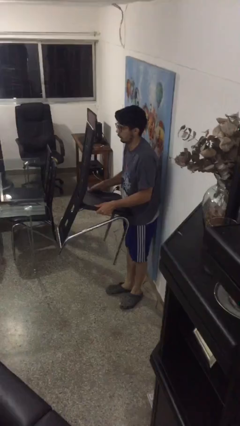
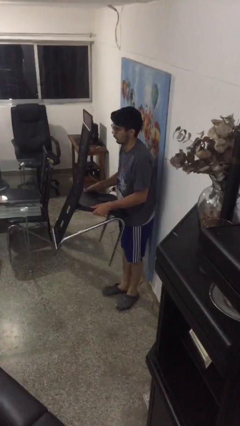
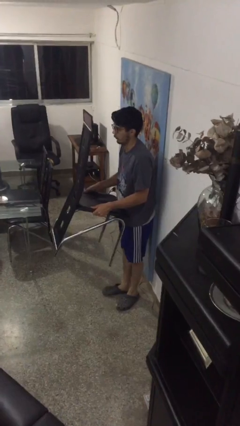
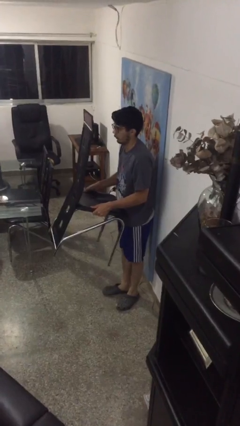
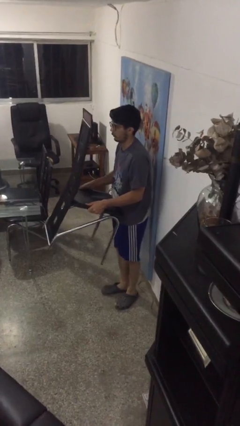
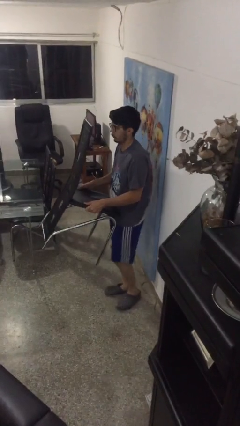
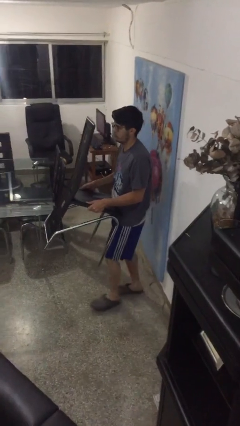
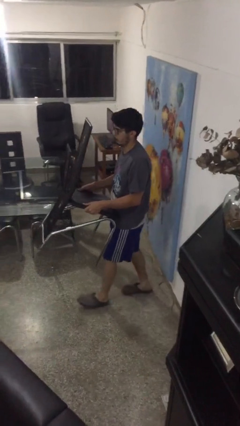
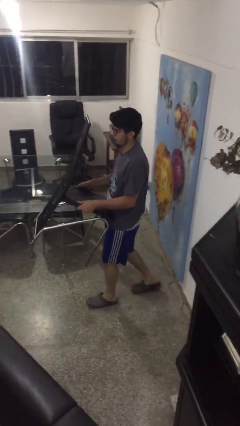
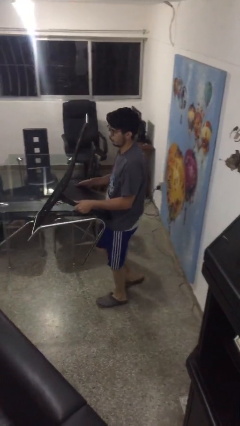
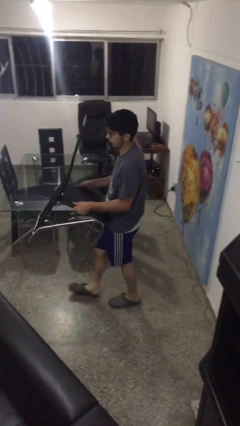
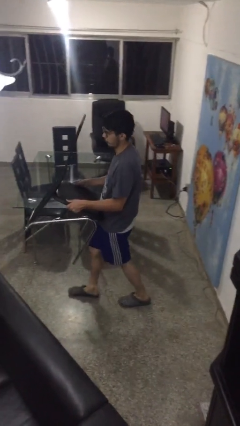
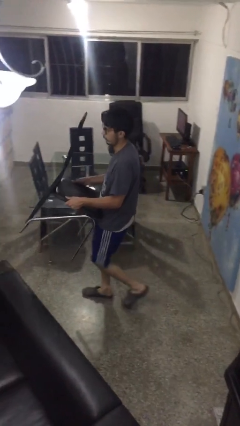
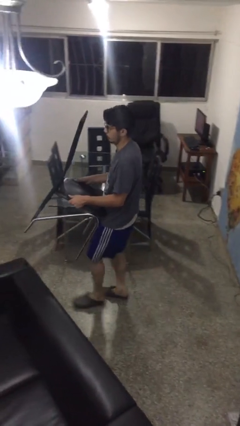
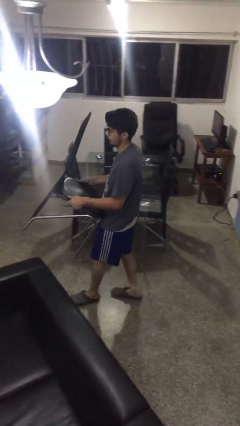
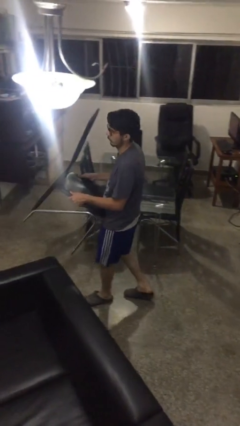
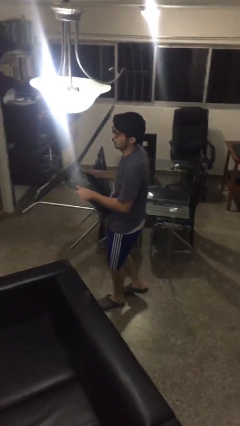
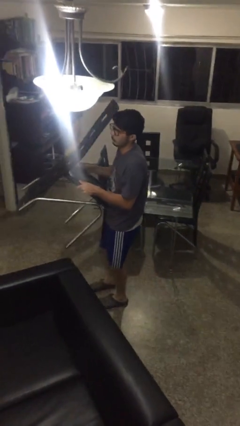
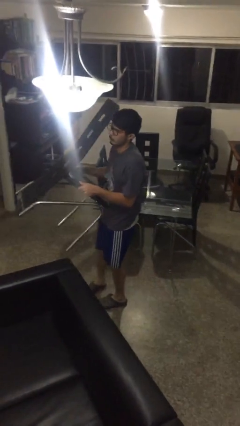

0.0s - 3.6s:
person carries furniture

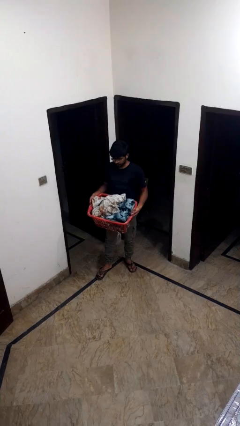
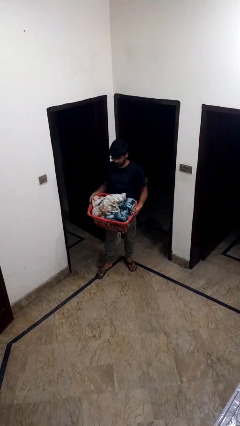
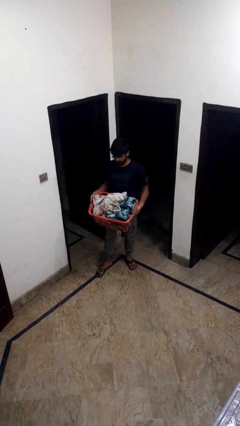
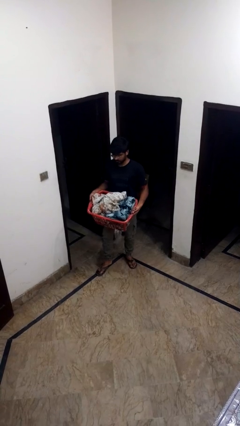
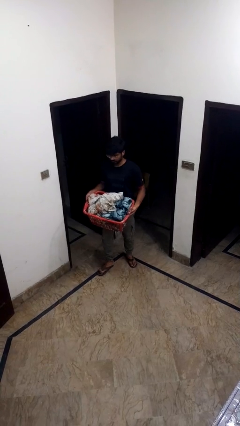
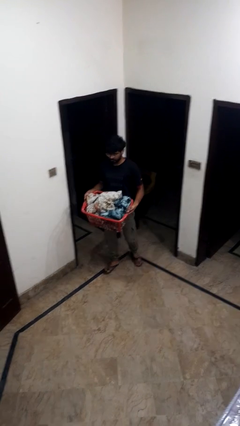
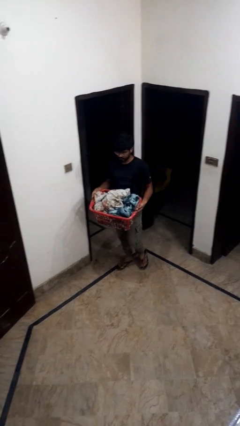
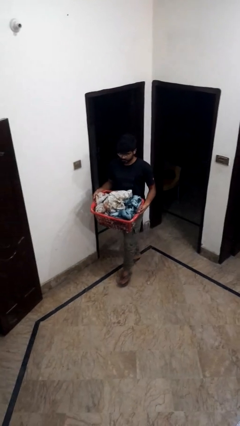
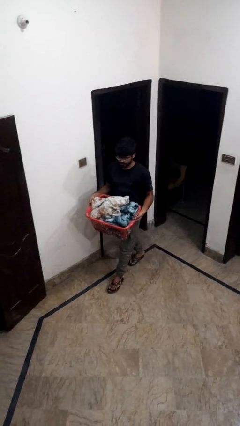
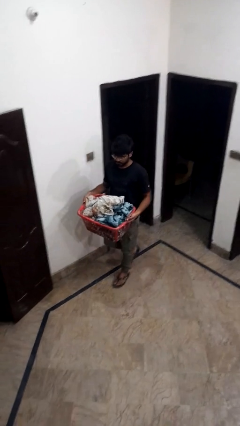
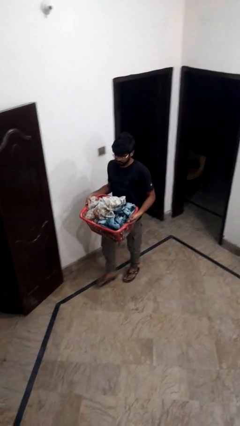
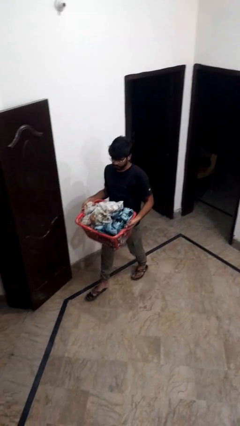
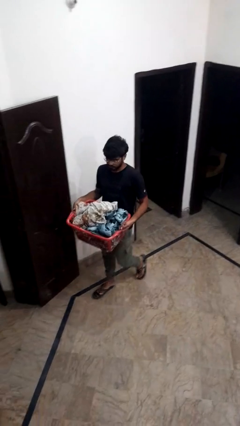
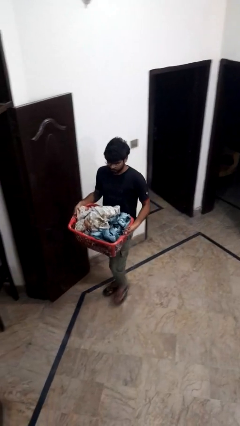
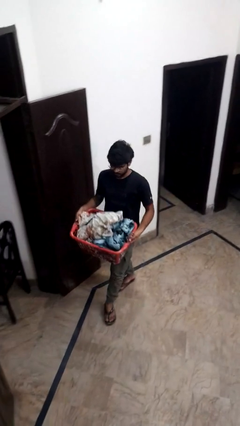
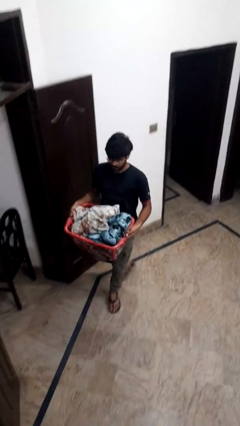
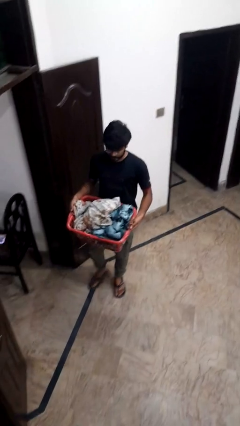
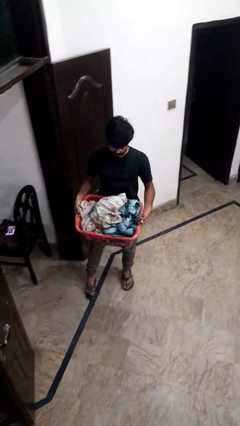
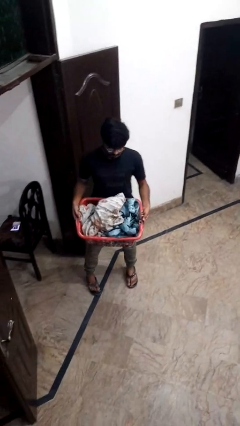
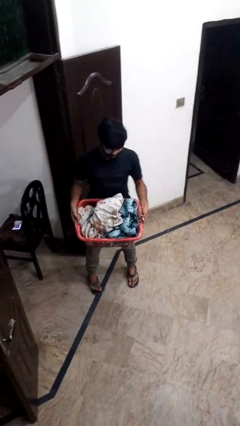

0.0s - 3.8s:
person carries laundry basket

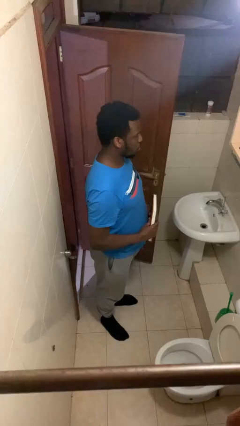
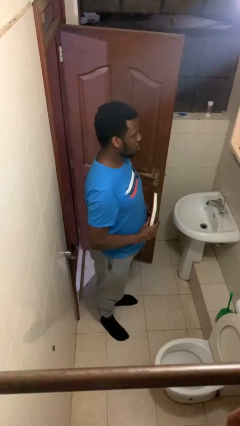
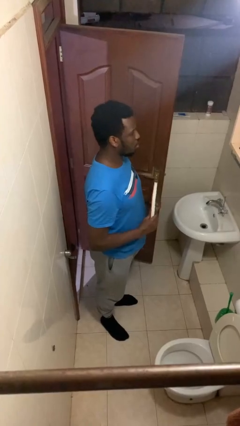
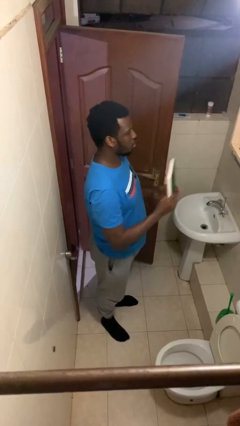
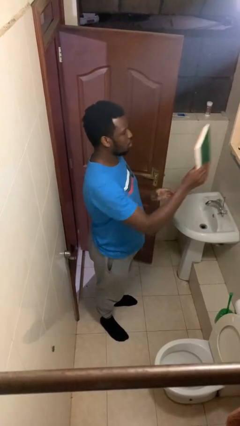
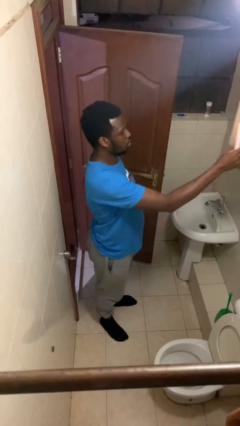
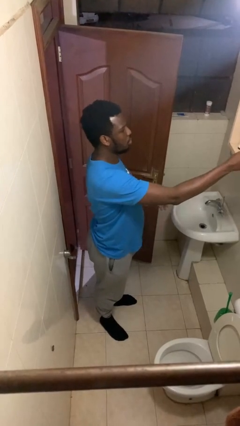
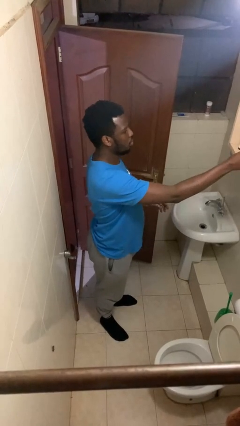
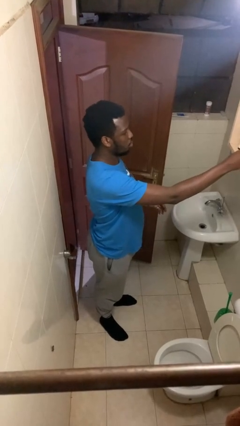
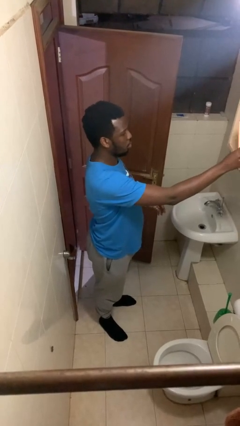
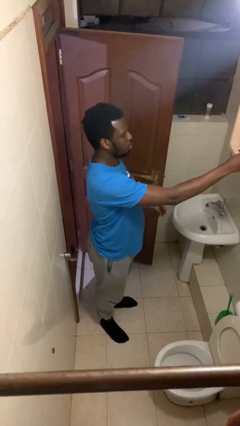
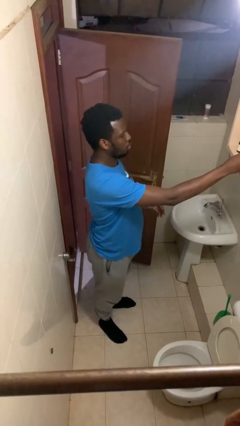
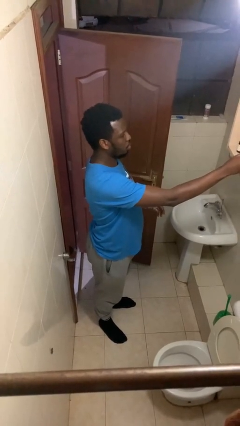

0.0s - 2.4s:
person puts down object into cabinet

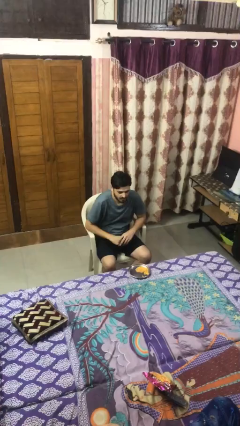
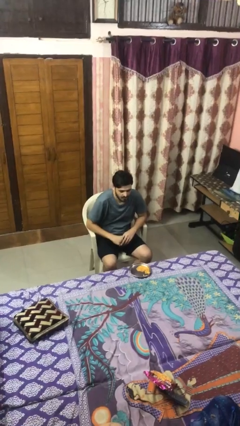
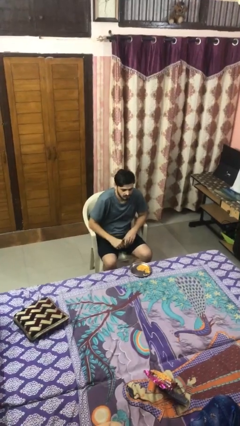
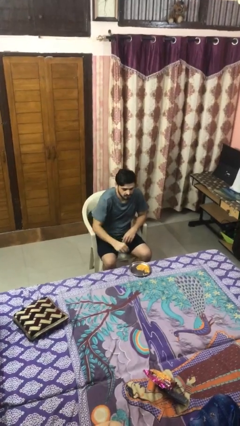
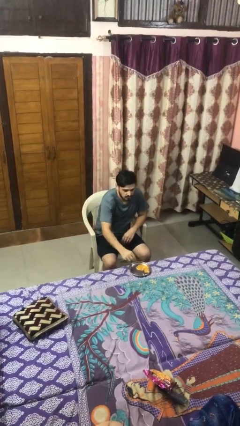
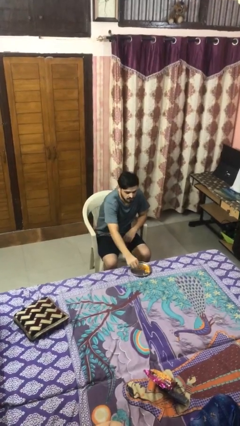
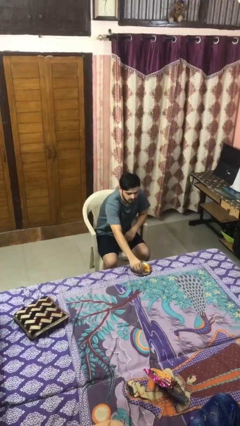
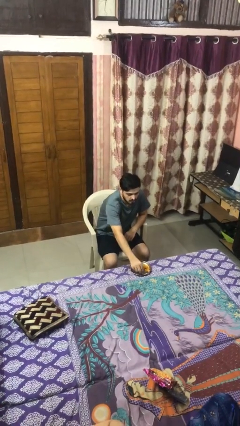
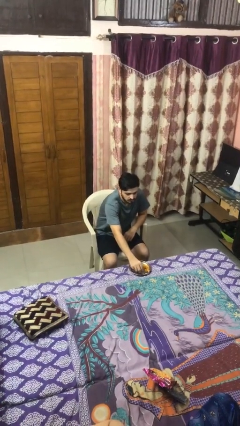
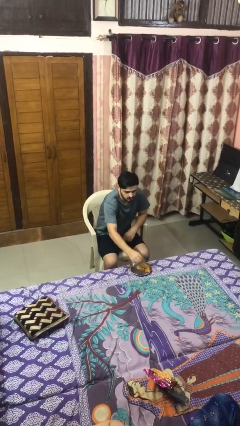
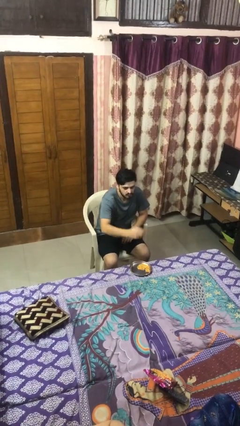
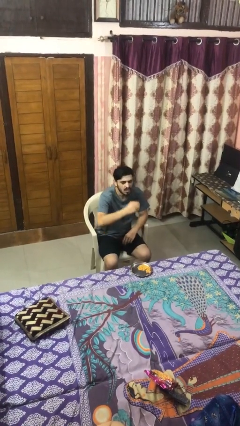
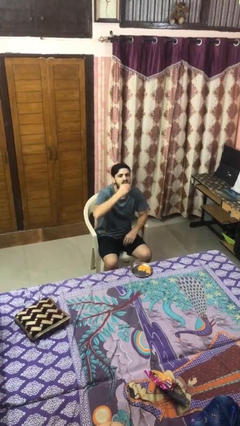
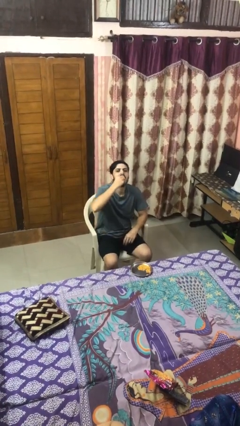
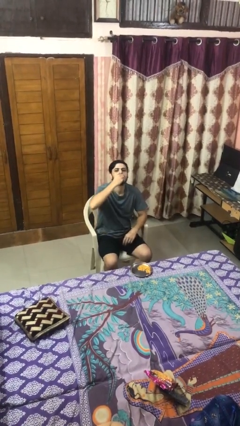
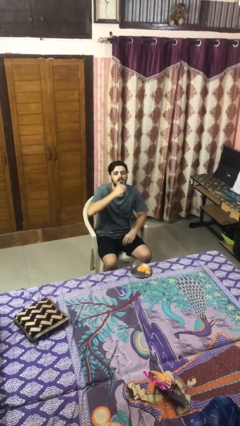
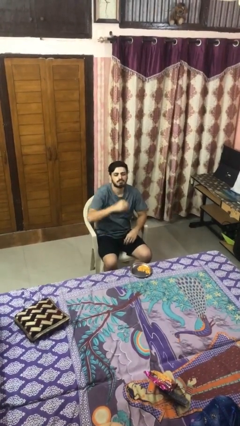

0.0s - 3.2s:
person eats with hands

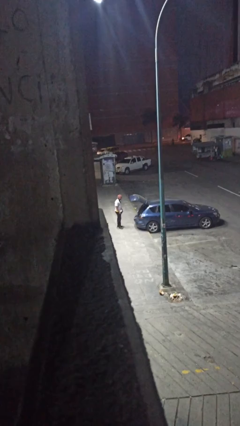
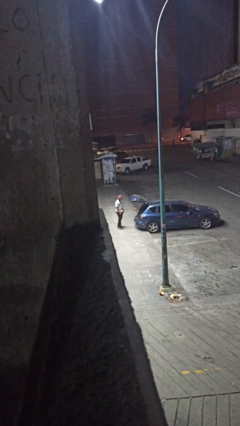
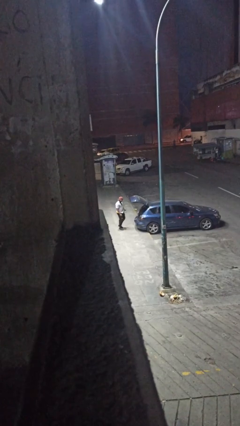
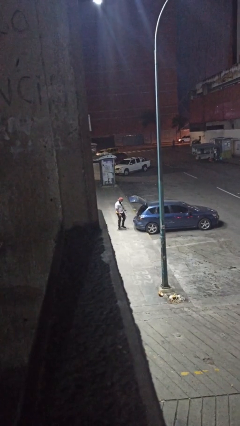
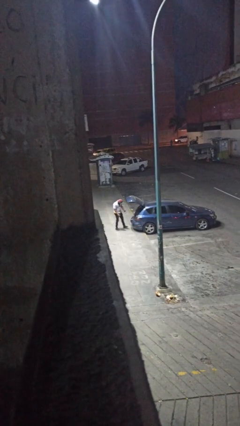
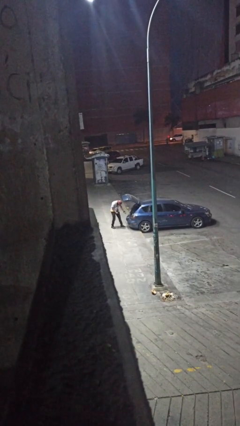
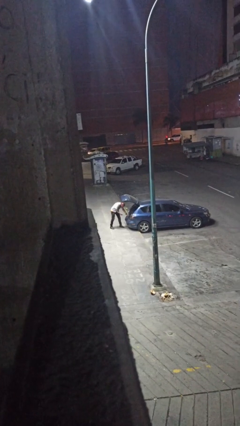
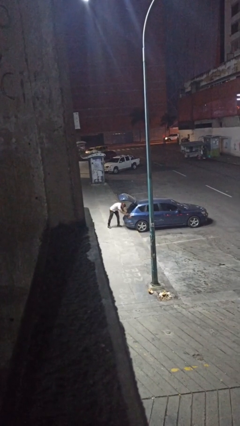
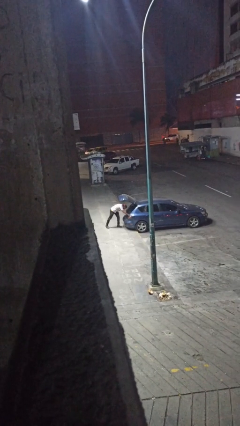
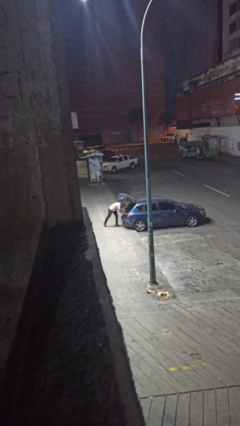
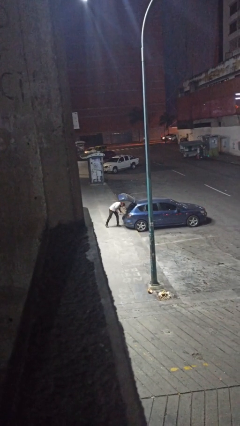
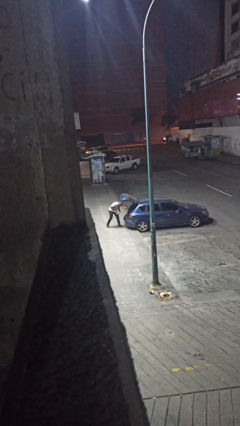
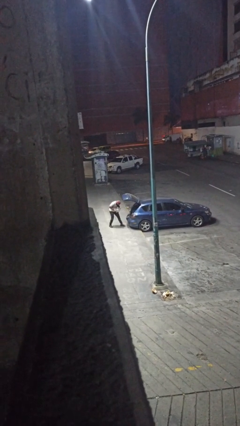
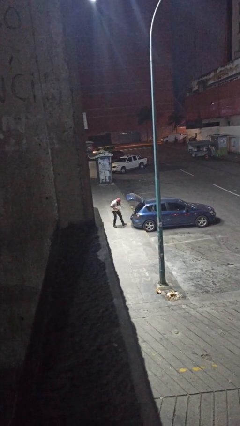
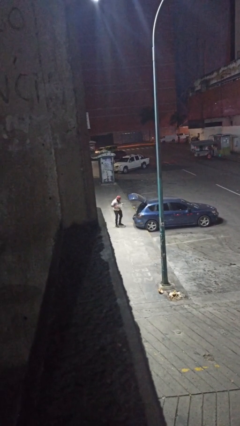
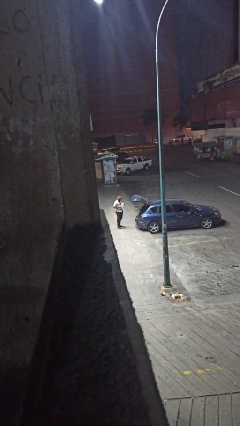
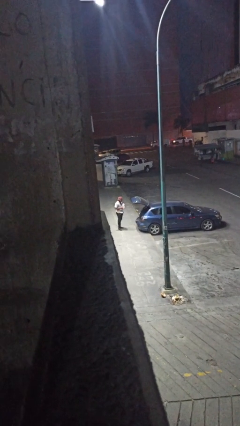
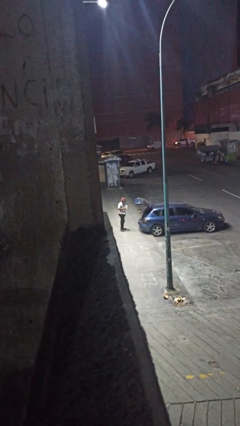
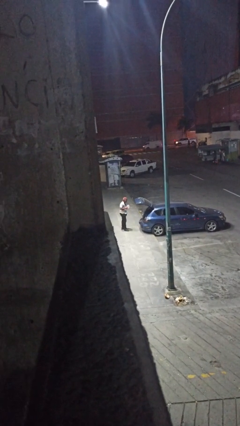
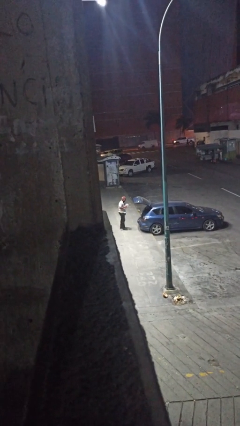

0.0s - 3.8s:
person unloads car

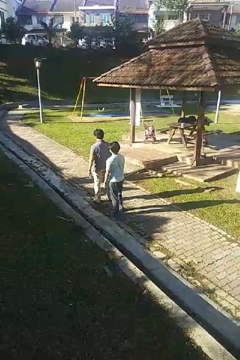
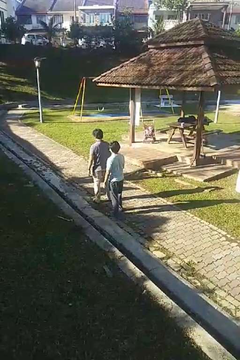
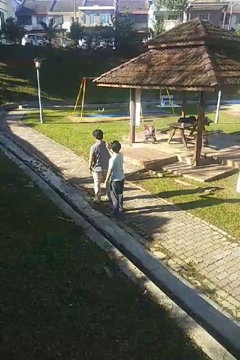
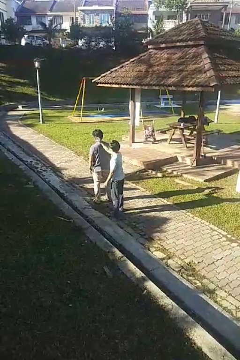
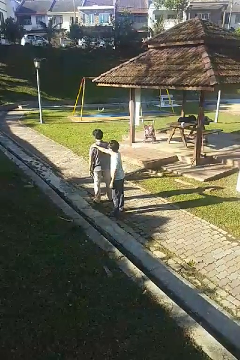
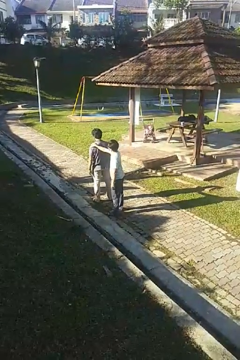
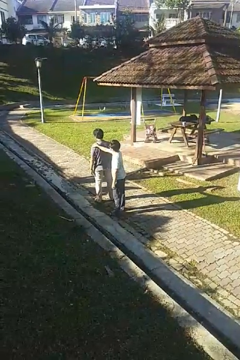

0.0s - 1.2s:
person grabs person by shoulder
